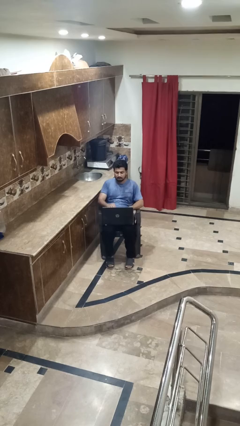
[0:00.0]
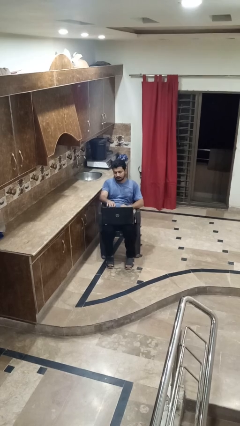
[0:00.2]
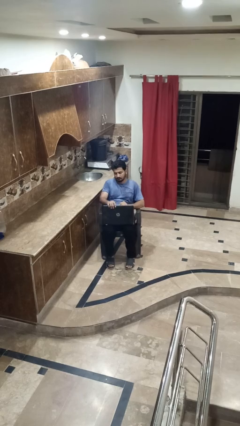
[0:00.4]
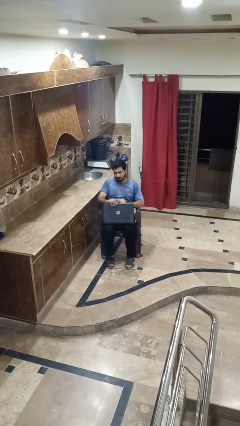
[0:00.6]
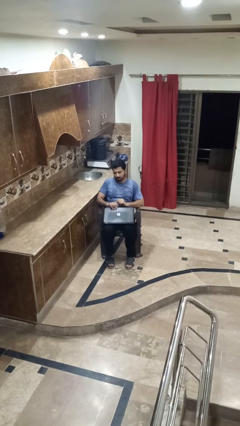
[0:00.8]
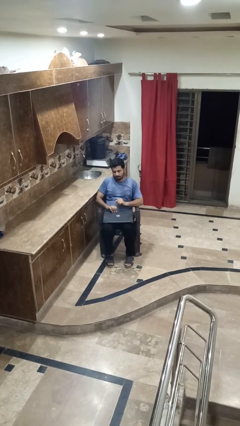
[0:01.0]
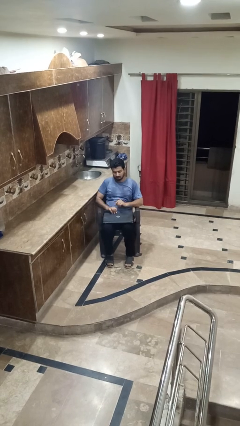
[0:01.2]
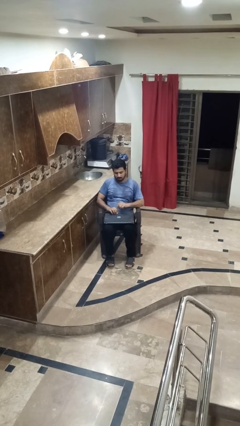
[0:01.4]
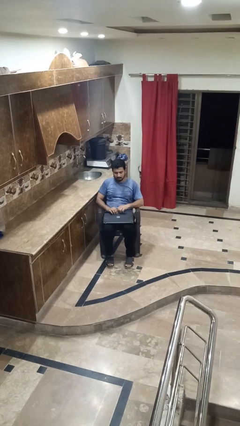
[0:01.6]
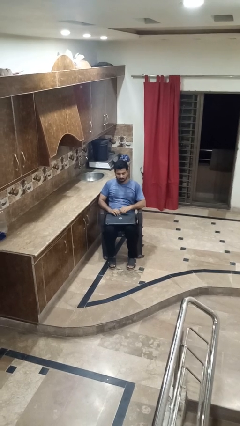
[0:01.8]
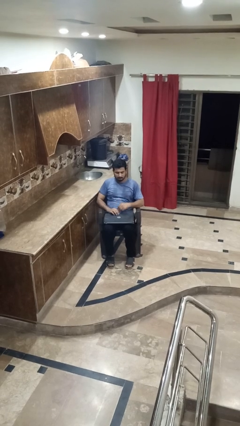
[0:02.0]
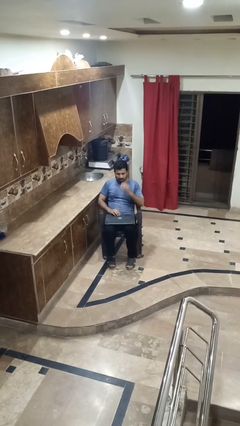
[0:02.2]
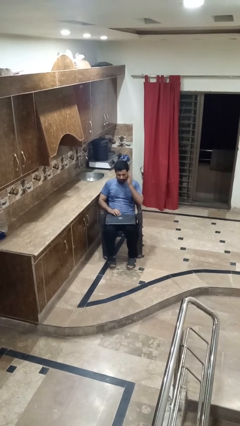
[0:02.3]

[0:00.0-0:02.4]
person closes laptop

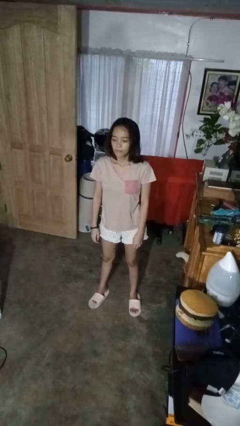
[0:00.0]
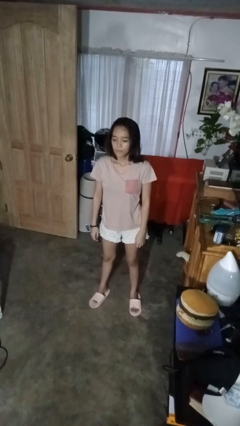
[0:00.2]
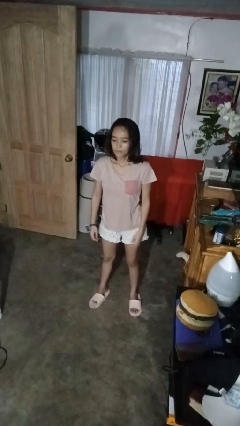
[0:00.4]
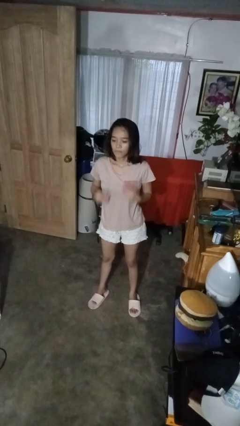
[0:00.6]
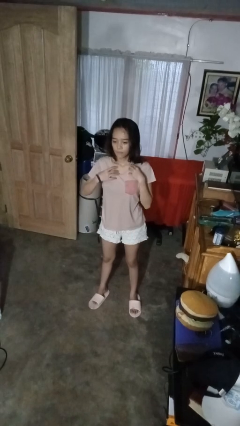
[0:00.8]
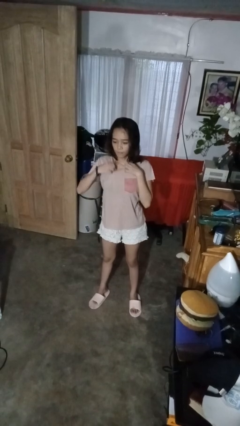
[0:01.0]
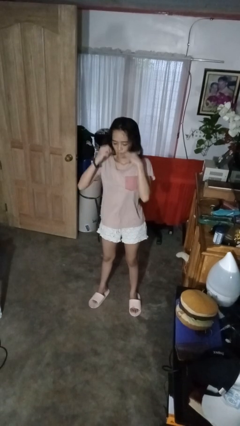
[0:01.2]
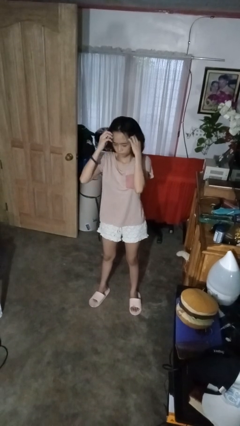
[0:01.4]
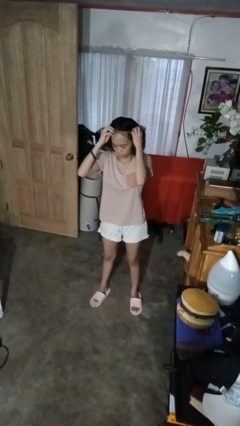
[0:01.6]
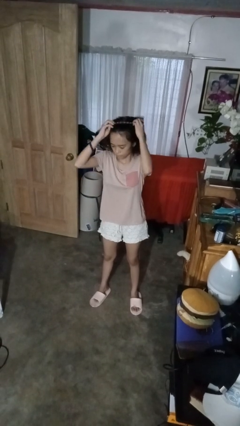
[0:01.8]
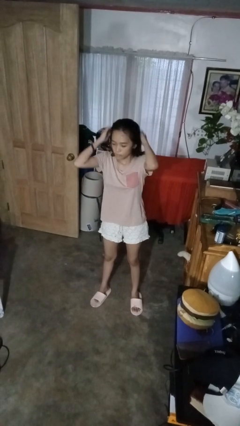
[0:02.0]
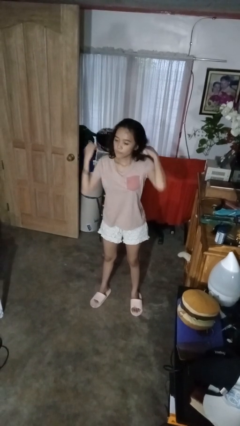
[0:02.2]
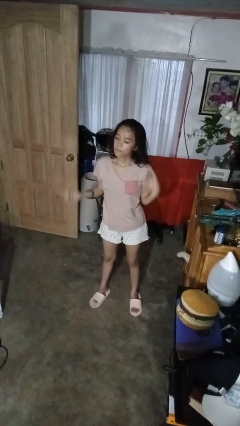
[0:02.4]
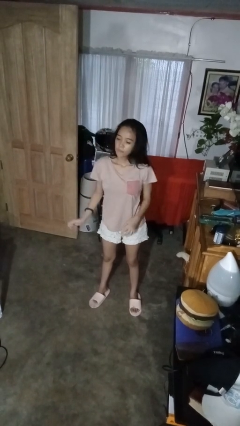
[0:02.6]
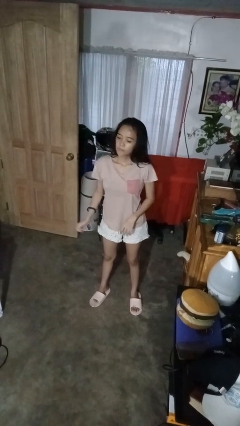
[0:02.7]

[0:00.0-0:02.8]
person takes off necklace

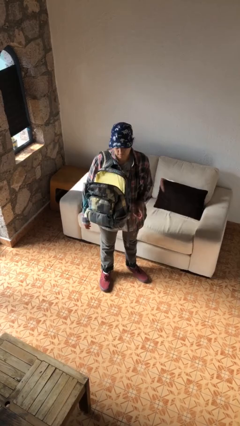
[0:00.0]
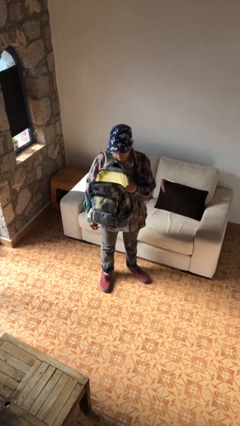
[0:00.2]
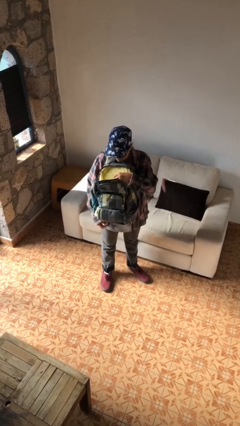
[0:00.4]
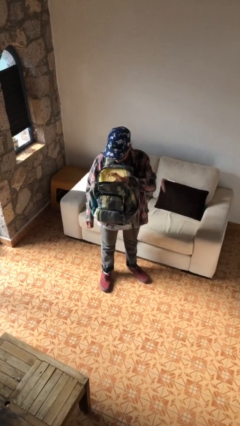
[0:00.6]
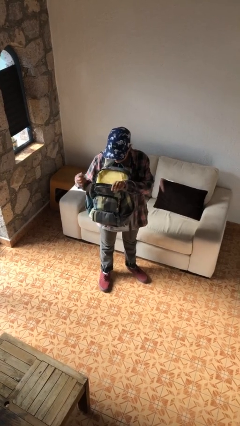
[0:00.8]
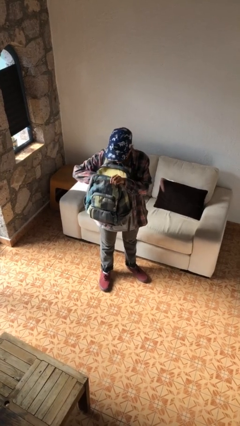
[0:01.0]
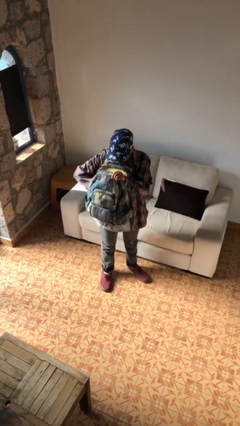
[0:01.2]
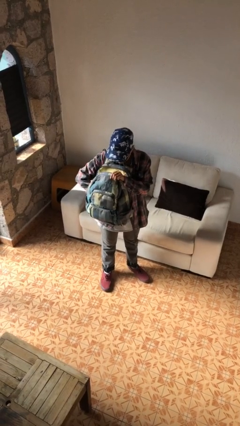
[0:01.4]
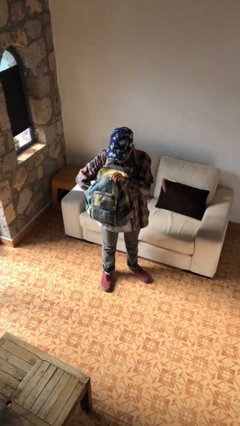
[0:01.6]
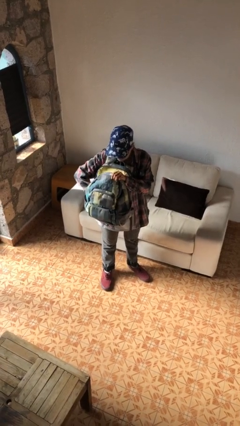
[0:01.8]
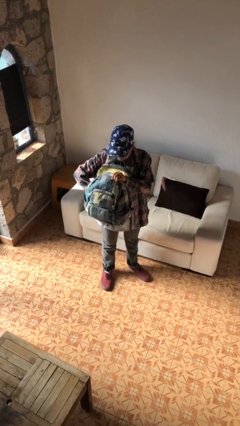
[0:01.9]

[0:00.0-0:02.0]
person searches in backpack

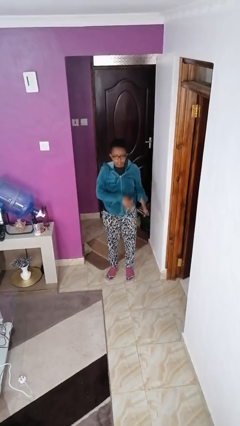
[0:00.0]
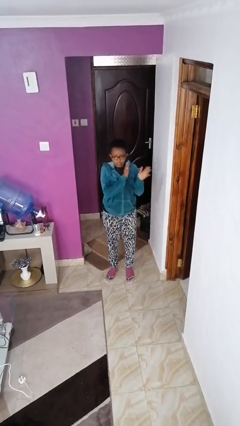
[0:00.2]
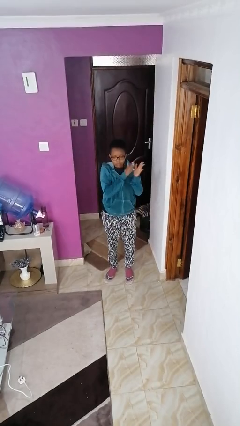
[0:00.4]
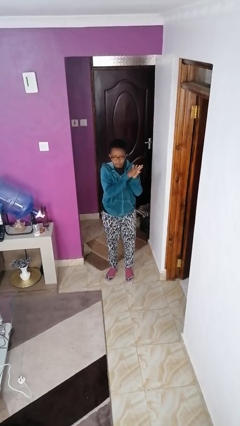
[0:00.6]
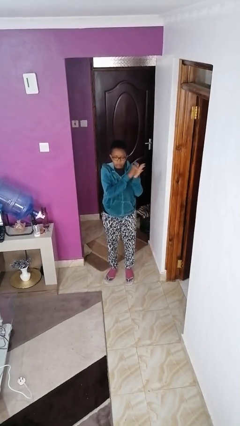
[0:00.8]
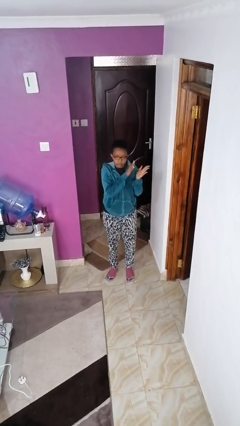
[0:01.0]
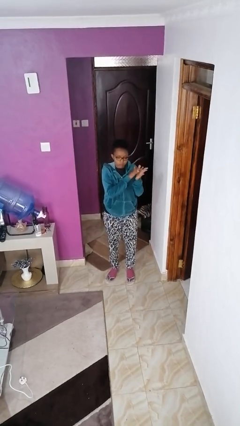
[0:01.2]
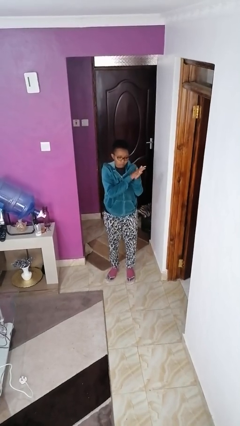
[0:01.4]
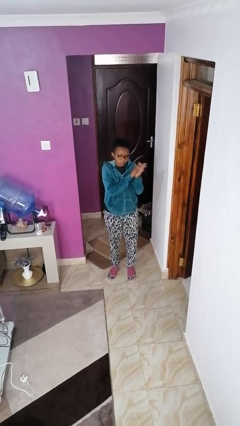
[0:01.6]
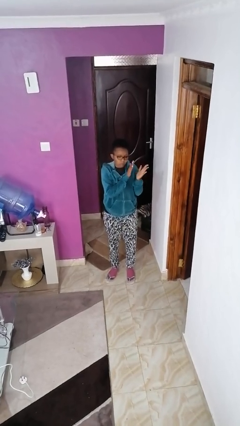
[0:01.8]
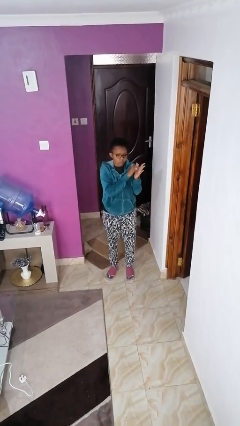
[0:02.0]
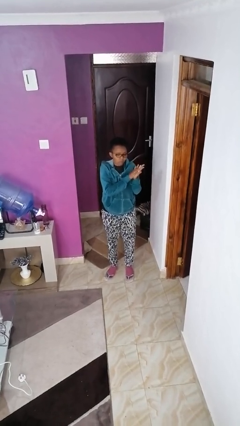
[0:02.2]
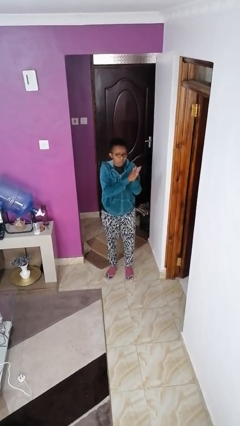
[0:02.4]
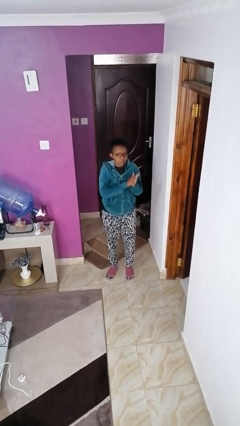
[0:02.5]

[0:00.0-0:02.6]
person claps hands

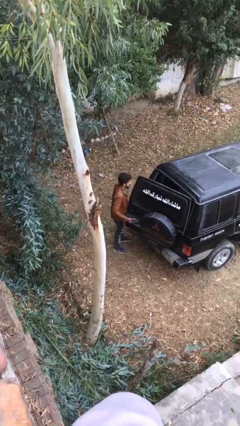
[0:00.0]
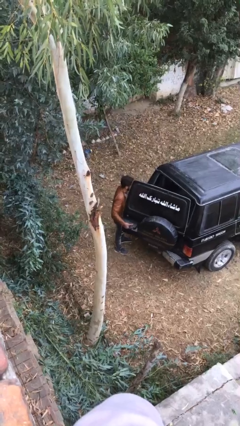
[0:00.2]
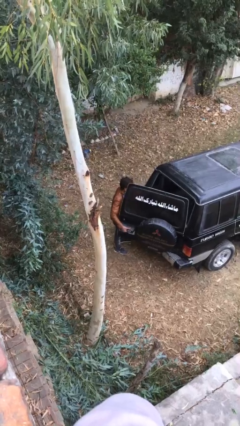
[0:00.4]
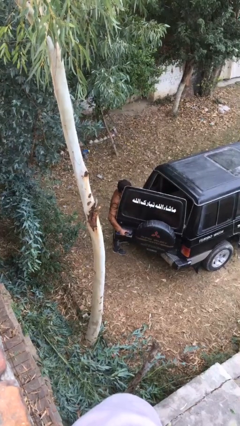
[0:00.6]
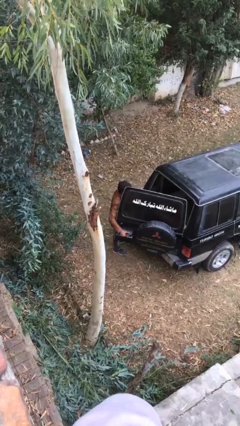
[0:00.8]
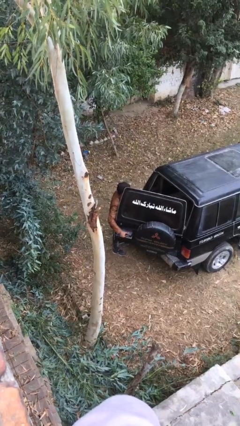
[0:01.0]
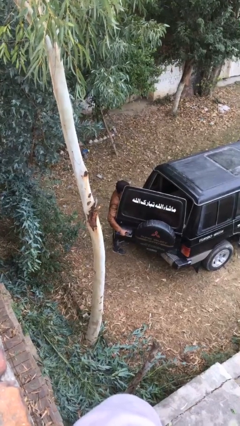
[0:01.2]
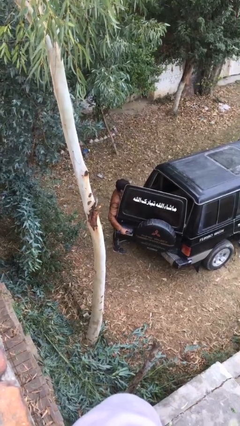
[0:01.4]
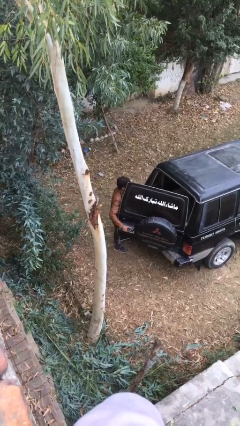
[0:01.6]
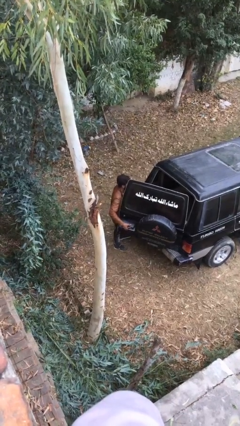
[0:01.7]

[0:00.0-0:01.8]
person opens car trunk

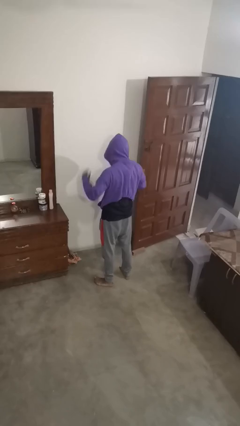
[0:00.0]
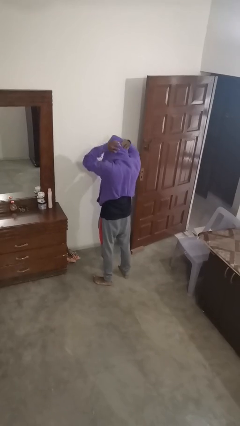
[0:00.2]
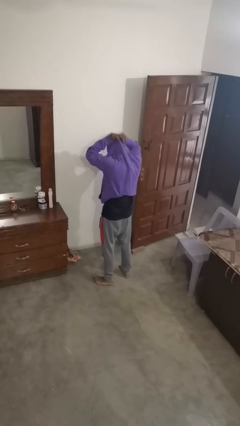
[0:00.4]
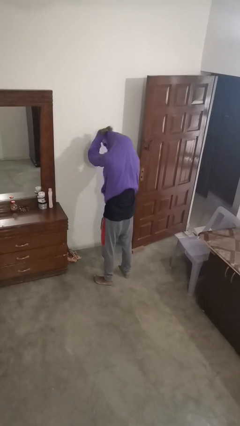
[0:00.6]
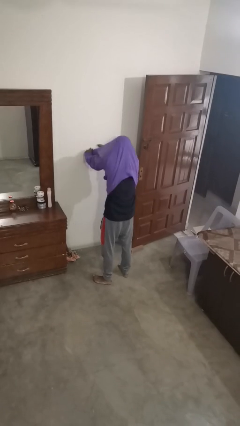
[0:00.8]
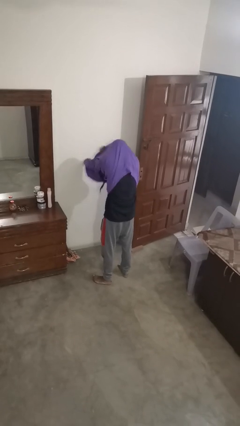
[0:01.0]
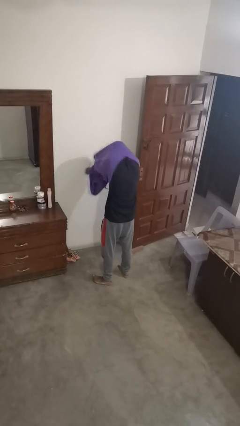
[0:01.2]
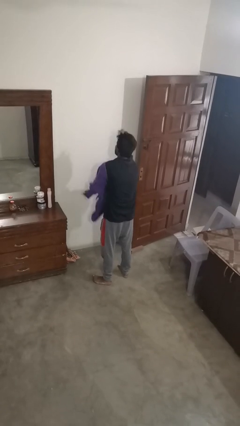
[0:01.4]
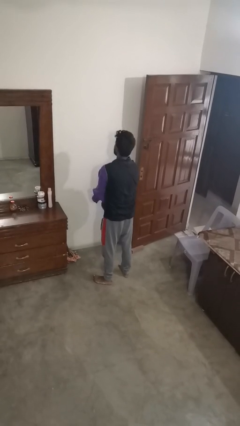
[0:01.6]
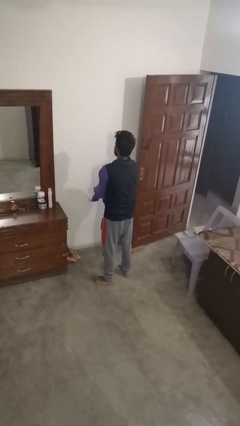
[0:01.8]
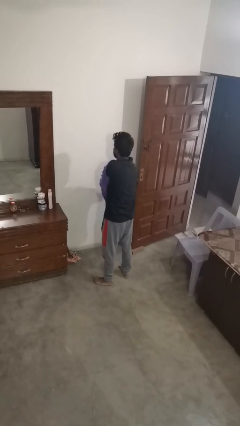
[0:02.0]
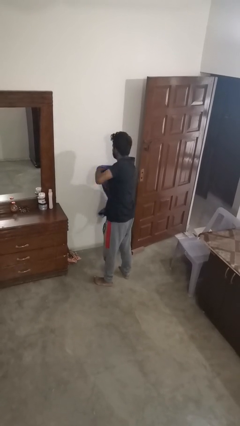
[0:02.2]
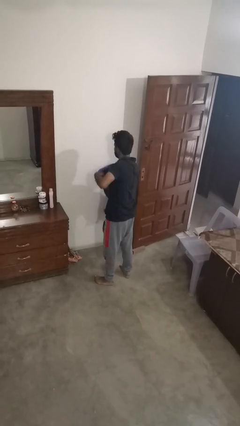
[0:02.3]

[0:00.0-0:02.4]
person takes off hoodie

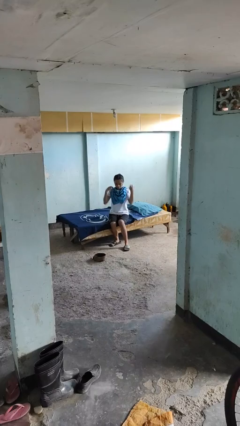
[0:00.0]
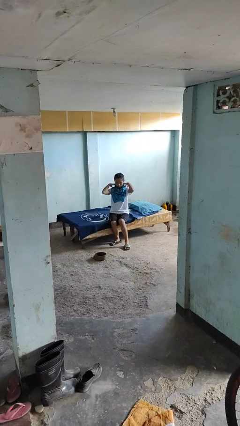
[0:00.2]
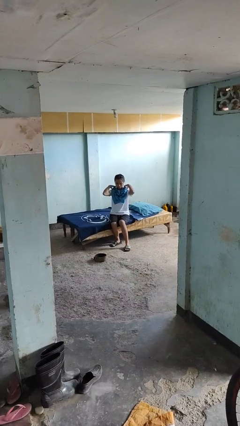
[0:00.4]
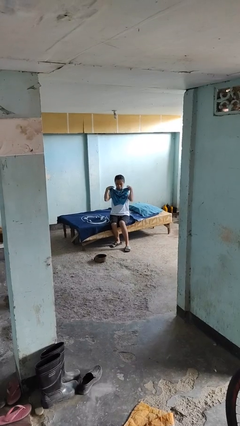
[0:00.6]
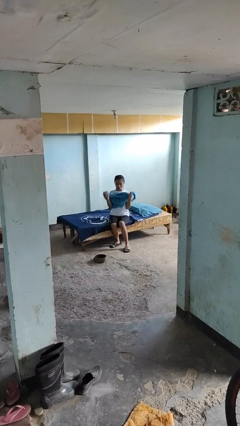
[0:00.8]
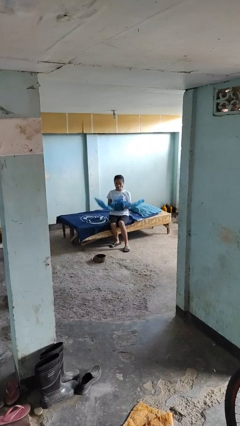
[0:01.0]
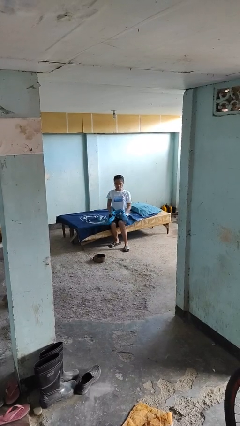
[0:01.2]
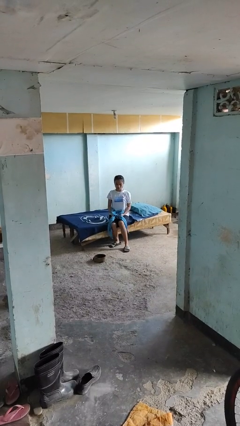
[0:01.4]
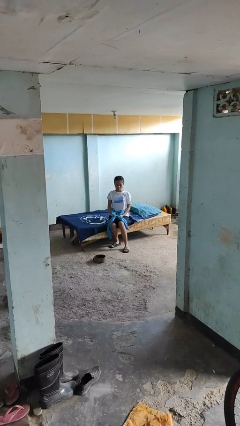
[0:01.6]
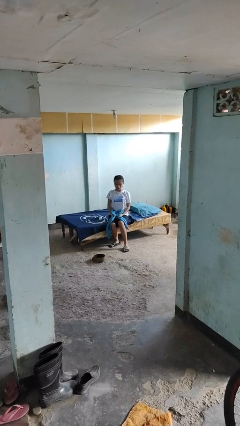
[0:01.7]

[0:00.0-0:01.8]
person takes off scarf

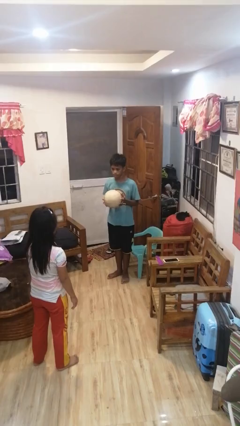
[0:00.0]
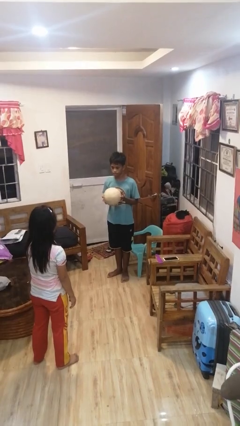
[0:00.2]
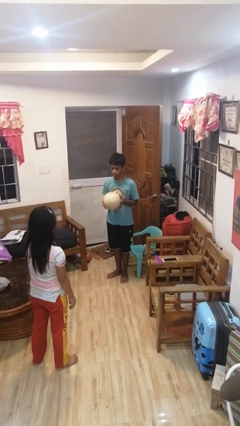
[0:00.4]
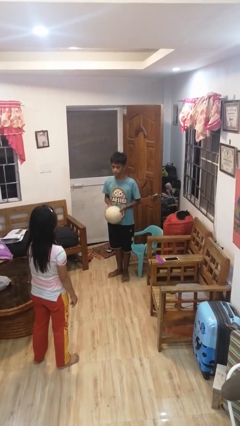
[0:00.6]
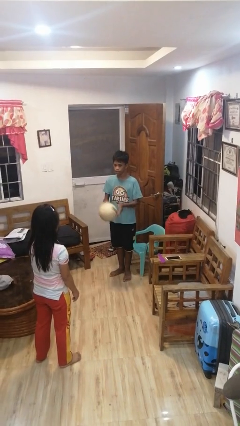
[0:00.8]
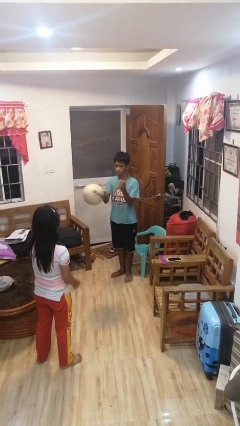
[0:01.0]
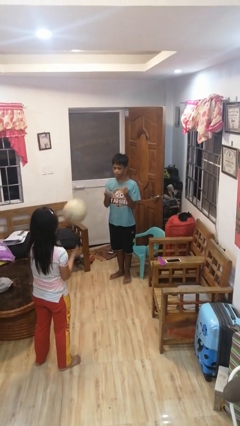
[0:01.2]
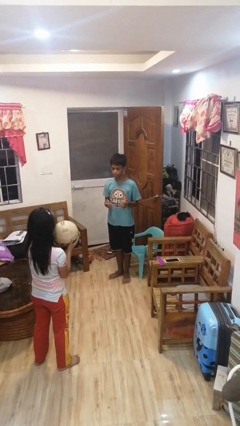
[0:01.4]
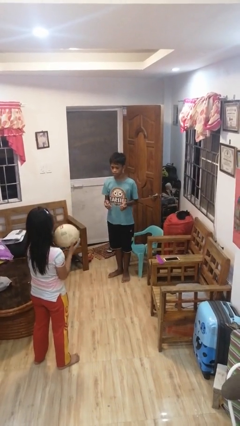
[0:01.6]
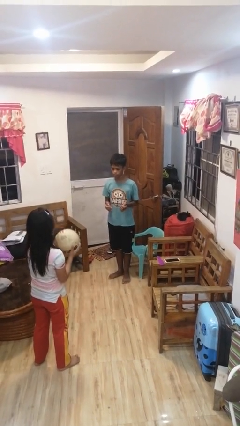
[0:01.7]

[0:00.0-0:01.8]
person throws object to person
